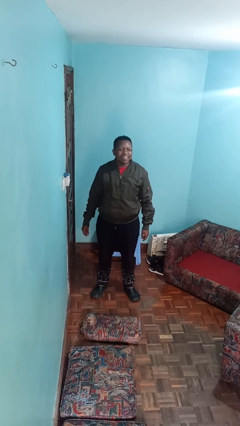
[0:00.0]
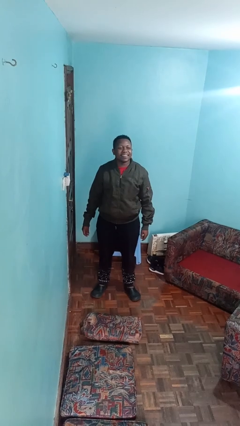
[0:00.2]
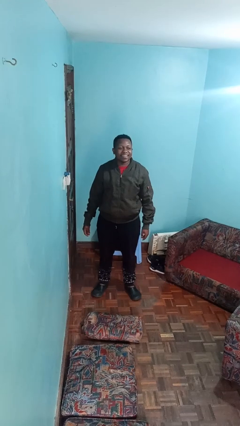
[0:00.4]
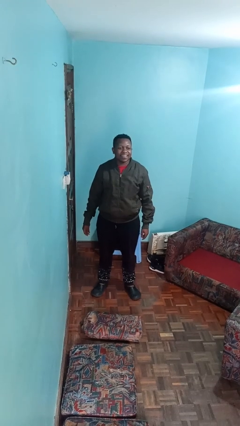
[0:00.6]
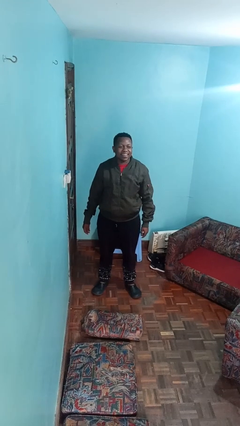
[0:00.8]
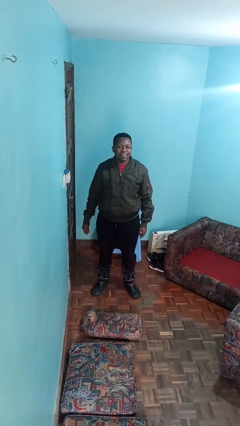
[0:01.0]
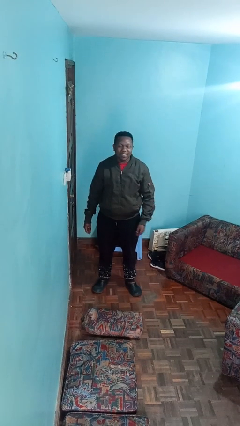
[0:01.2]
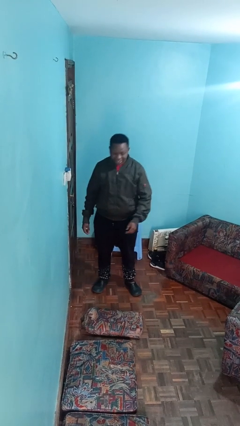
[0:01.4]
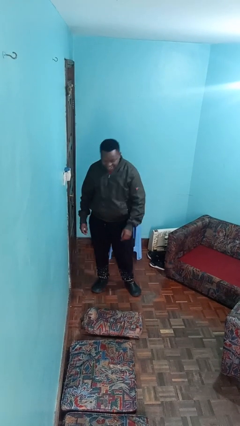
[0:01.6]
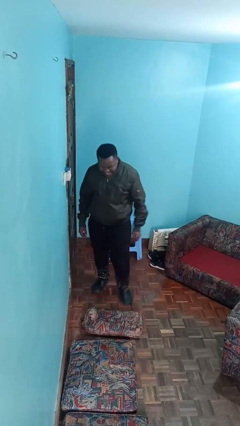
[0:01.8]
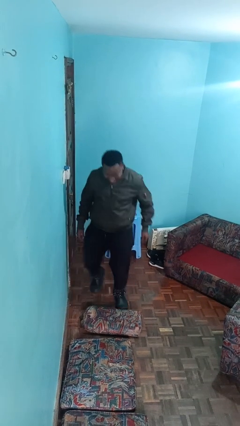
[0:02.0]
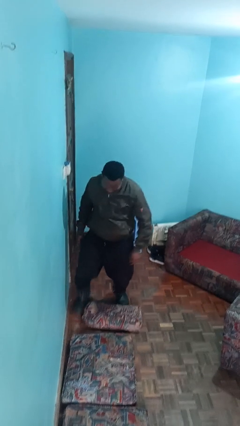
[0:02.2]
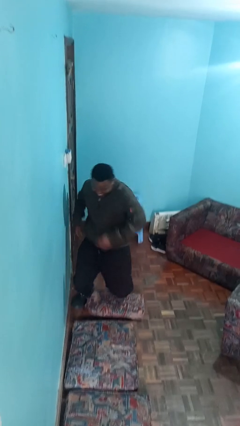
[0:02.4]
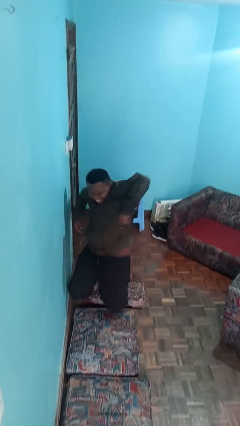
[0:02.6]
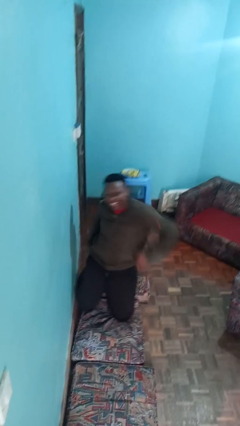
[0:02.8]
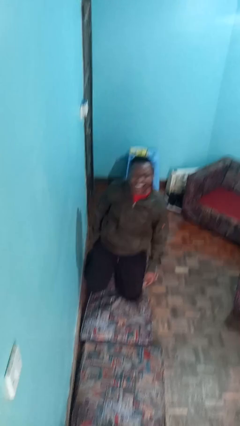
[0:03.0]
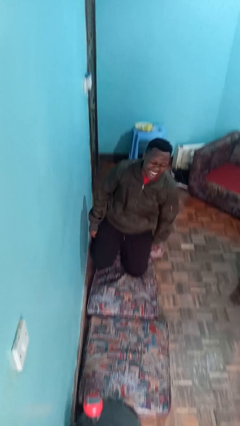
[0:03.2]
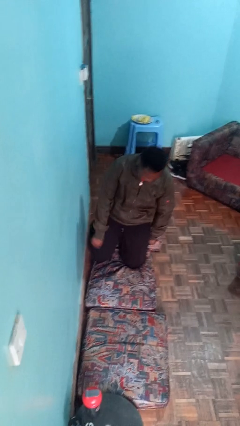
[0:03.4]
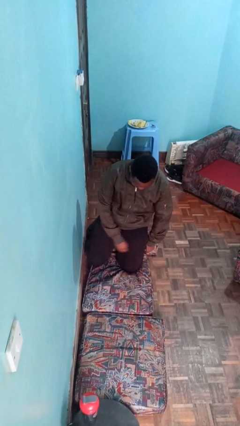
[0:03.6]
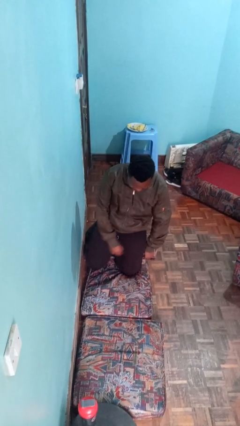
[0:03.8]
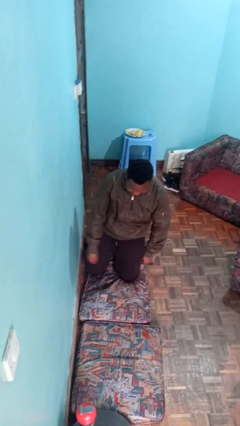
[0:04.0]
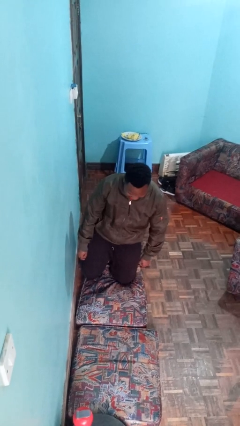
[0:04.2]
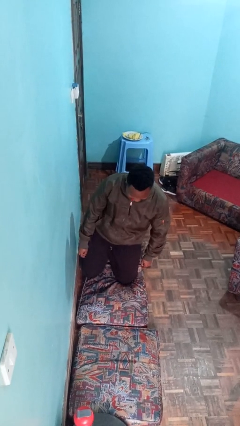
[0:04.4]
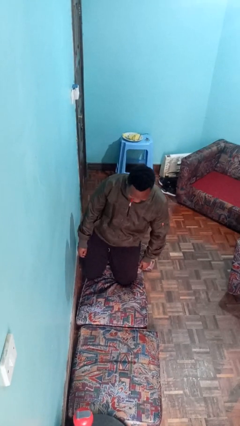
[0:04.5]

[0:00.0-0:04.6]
person trips on object on floor

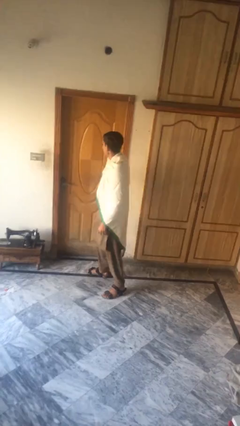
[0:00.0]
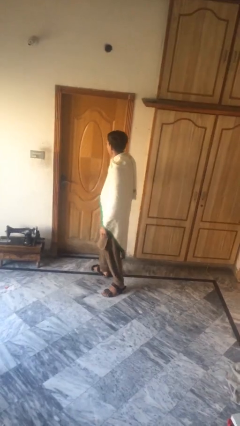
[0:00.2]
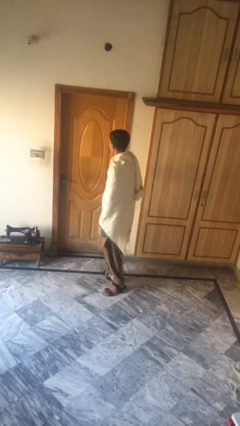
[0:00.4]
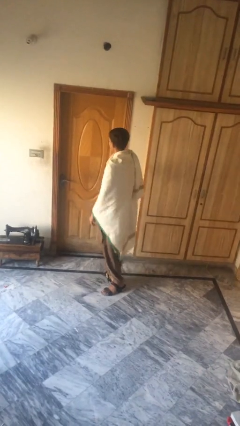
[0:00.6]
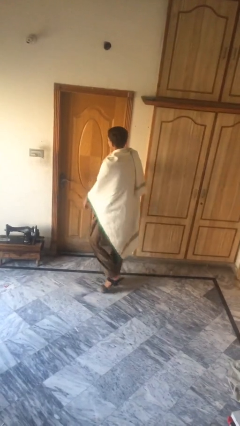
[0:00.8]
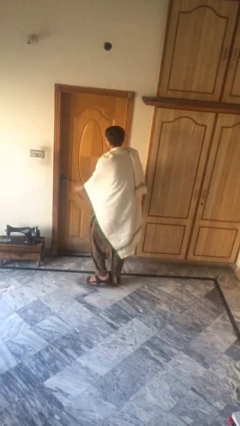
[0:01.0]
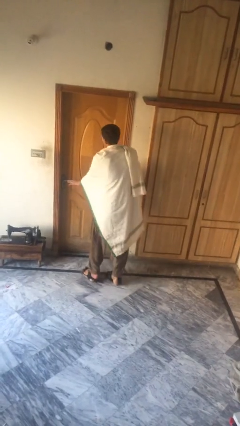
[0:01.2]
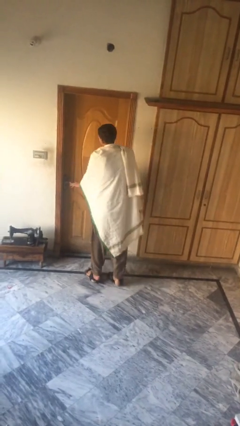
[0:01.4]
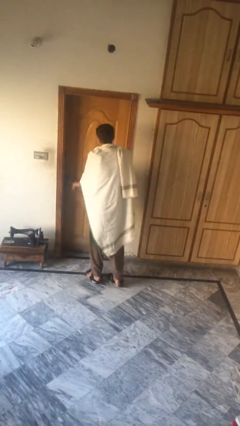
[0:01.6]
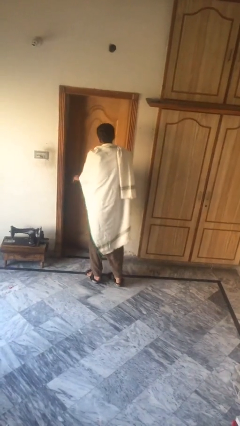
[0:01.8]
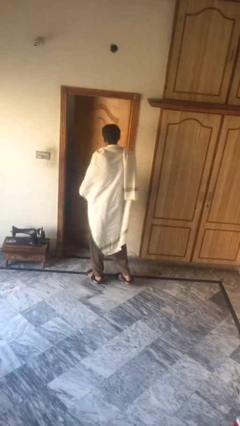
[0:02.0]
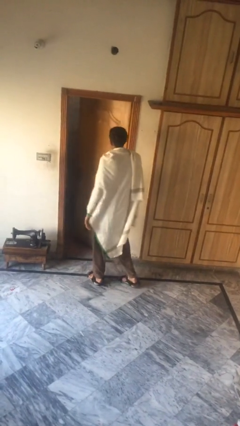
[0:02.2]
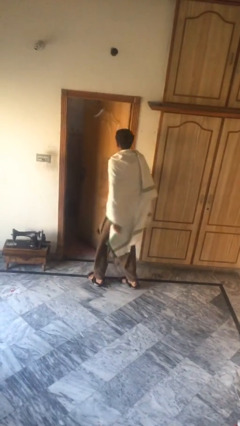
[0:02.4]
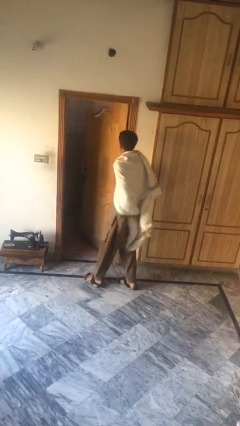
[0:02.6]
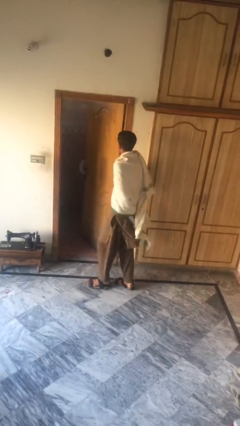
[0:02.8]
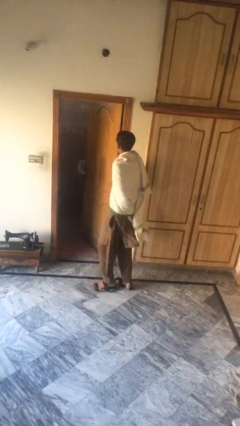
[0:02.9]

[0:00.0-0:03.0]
person opens facility door

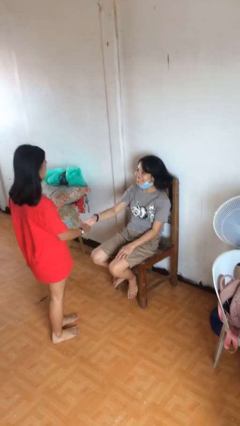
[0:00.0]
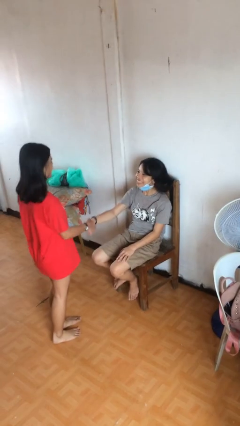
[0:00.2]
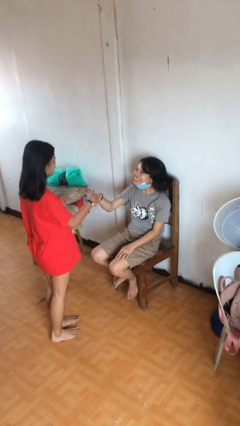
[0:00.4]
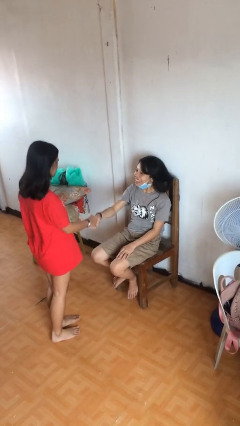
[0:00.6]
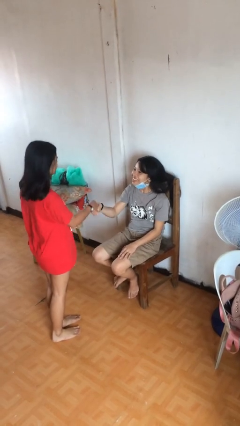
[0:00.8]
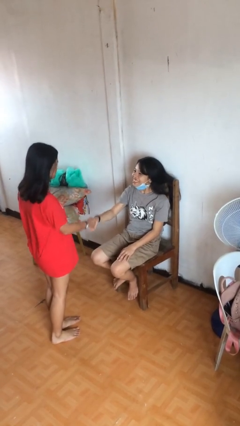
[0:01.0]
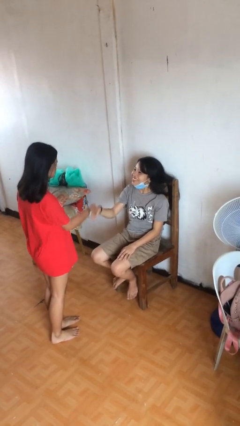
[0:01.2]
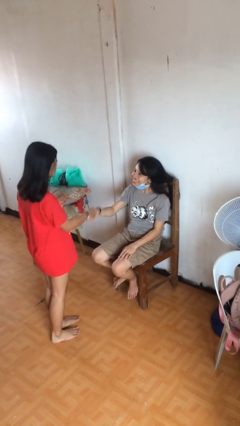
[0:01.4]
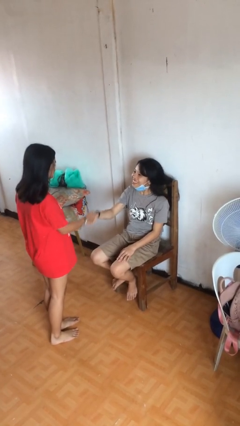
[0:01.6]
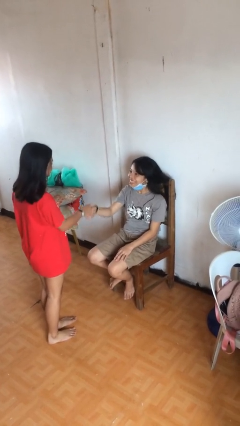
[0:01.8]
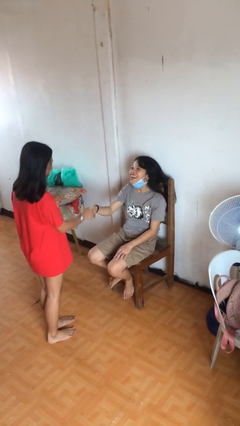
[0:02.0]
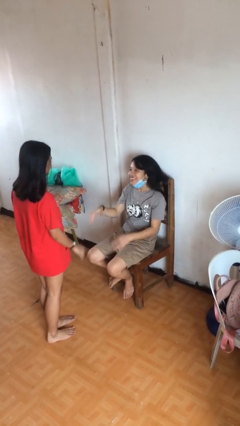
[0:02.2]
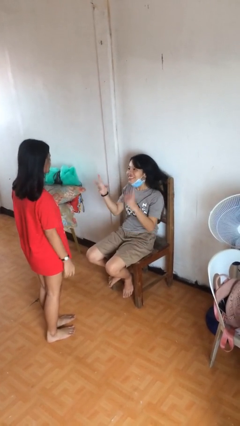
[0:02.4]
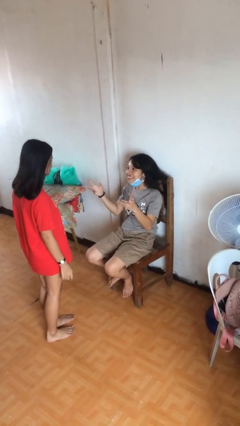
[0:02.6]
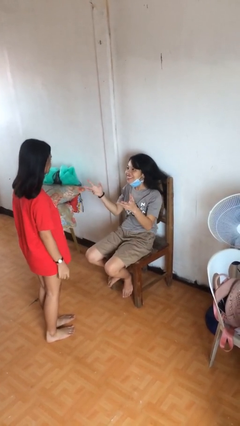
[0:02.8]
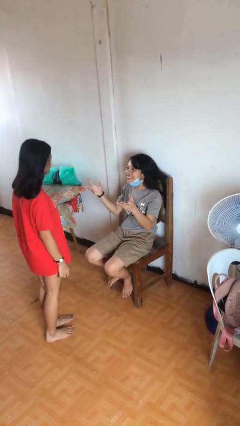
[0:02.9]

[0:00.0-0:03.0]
person shakes hand

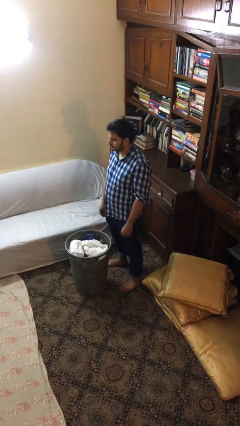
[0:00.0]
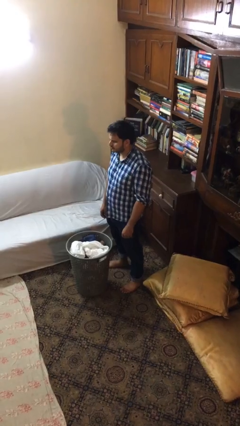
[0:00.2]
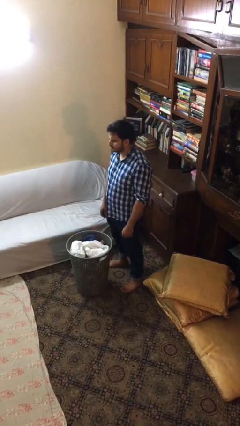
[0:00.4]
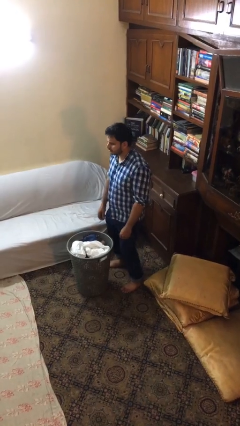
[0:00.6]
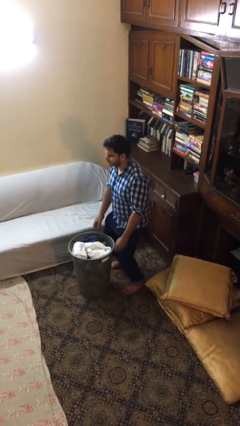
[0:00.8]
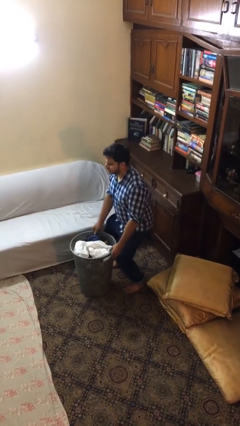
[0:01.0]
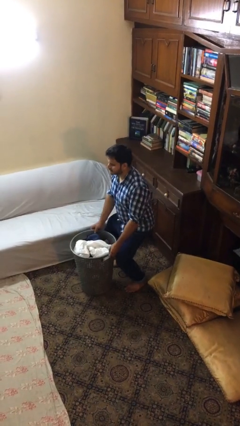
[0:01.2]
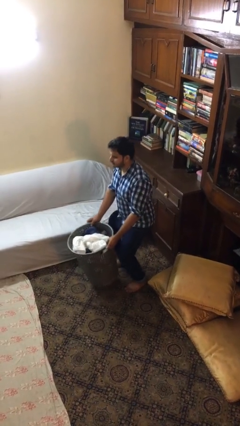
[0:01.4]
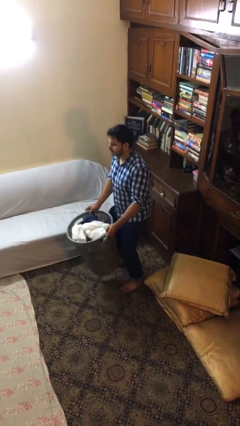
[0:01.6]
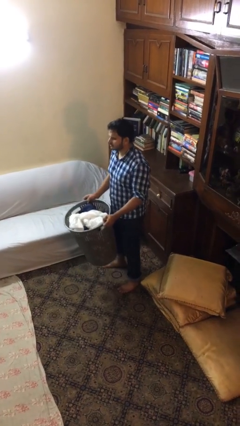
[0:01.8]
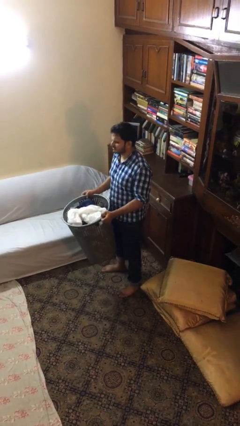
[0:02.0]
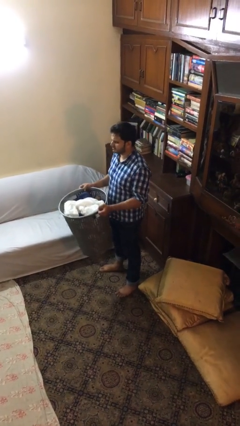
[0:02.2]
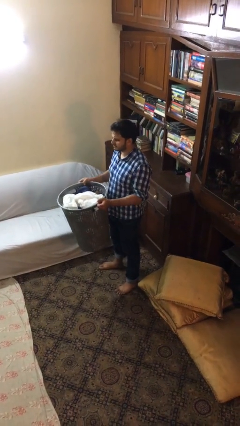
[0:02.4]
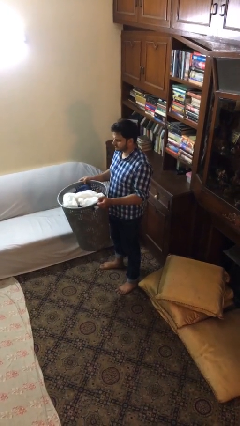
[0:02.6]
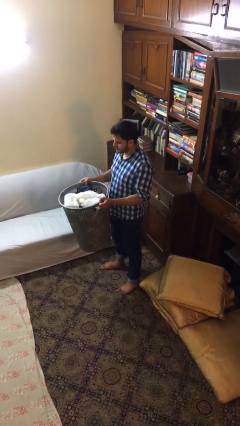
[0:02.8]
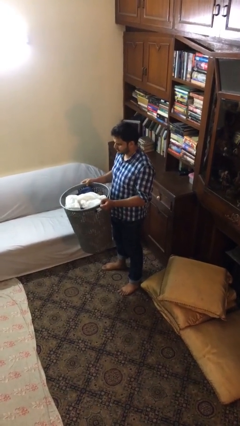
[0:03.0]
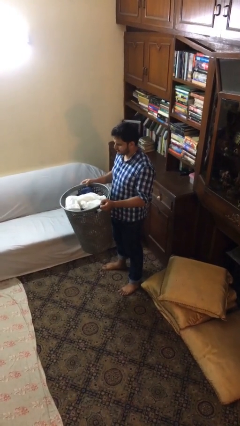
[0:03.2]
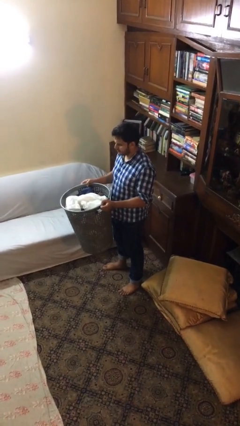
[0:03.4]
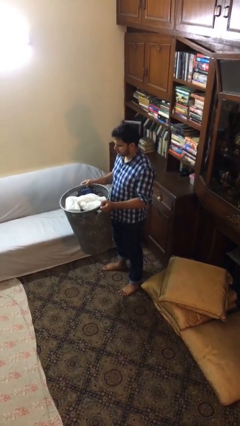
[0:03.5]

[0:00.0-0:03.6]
person picks up object from floor

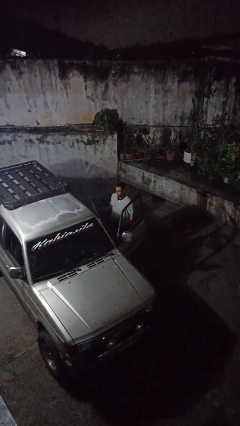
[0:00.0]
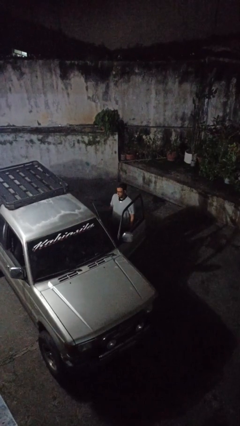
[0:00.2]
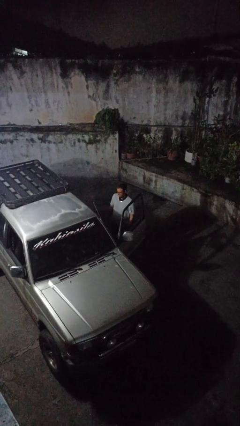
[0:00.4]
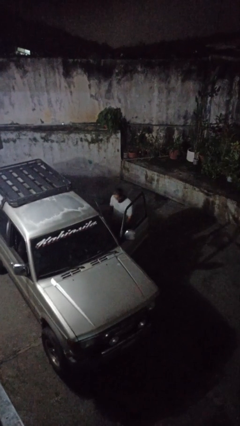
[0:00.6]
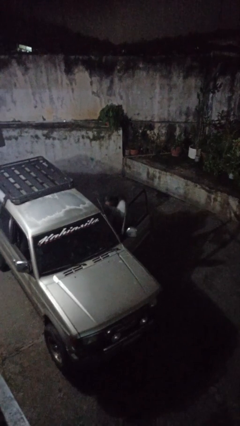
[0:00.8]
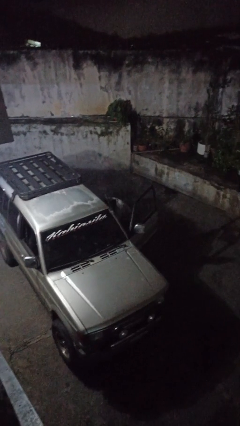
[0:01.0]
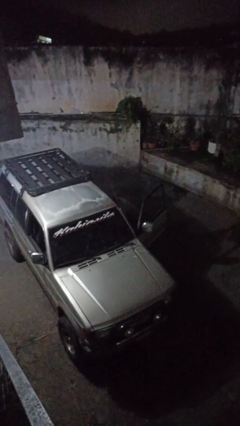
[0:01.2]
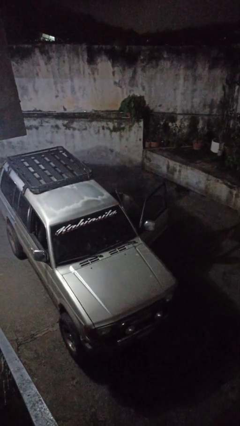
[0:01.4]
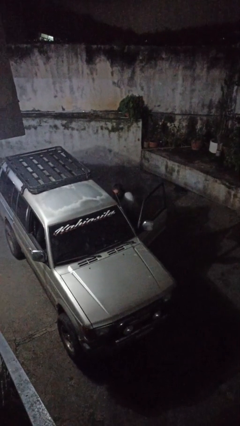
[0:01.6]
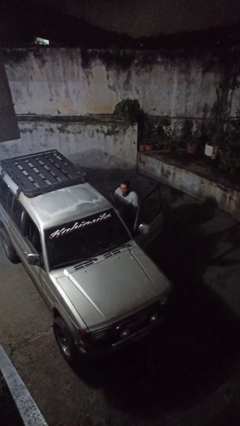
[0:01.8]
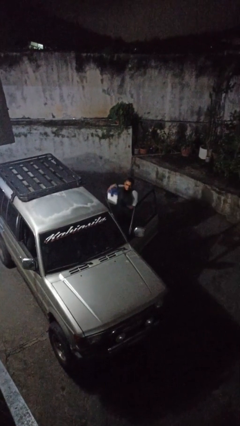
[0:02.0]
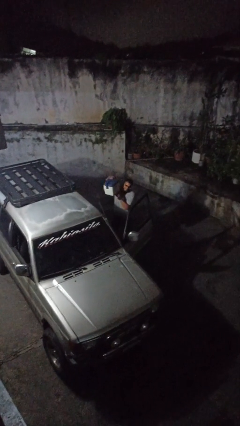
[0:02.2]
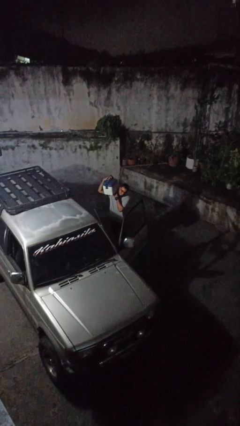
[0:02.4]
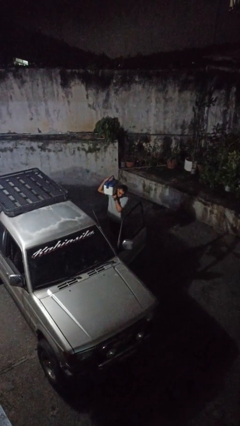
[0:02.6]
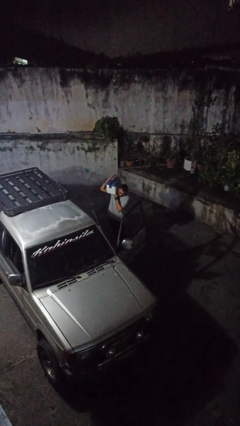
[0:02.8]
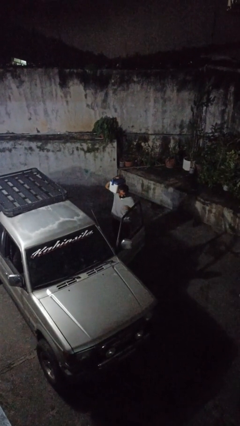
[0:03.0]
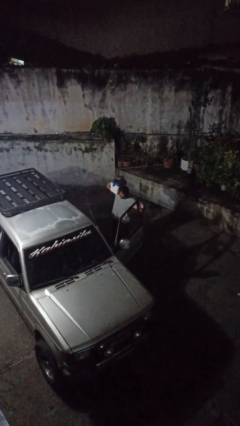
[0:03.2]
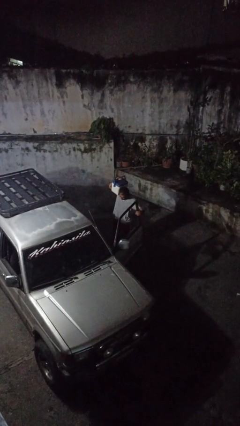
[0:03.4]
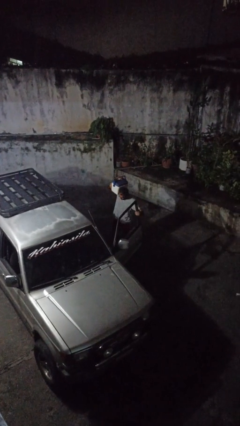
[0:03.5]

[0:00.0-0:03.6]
person unloads car
